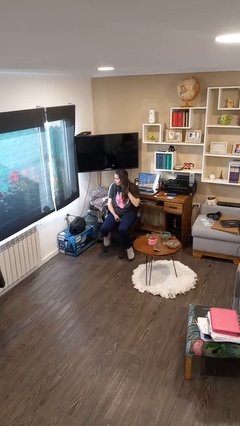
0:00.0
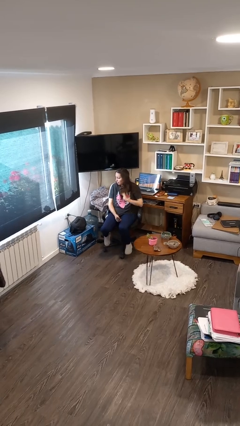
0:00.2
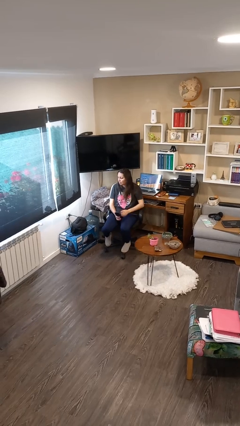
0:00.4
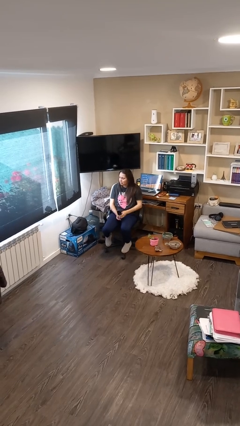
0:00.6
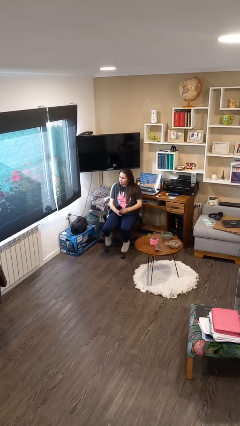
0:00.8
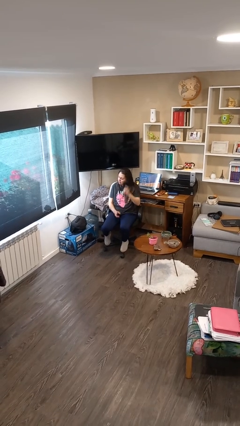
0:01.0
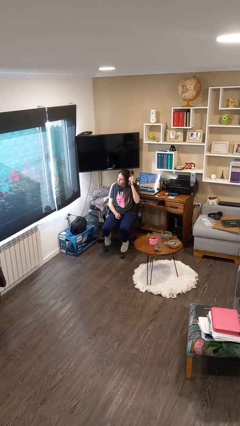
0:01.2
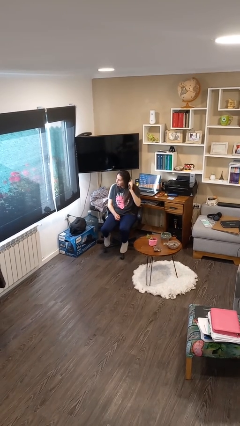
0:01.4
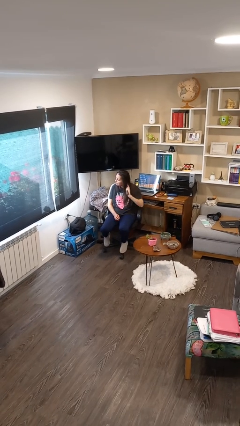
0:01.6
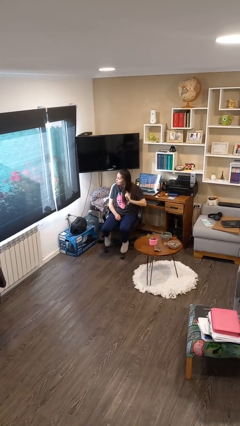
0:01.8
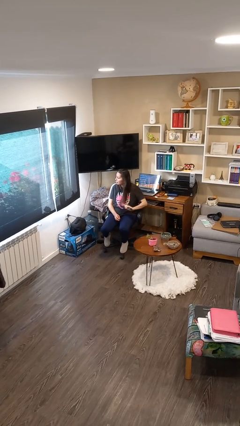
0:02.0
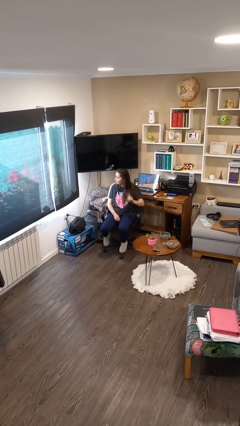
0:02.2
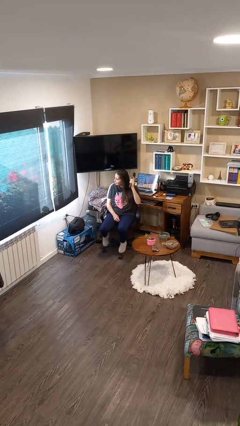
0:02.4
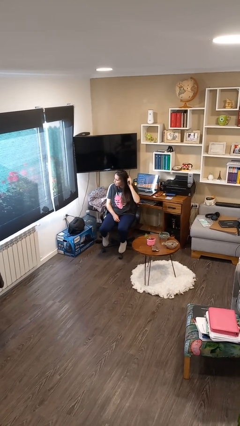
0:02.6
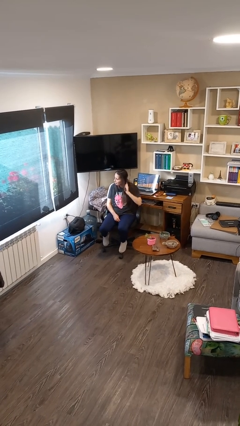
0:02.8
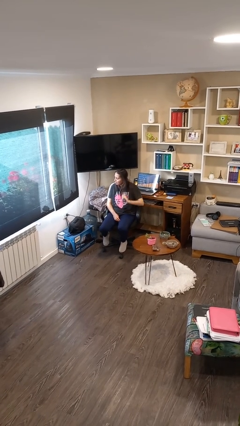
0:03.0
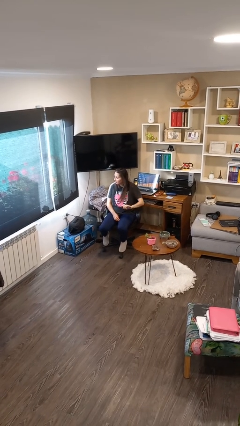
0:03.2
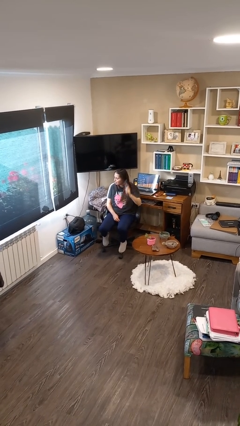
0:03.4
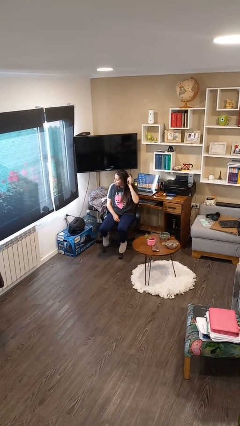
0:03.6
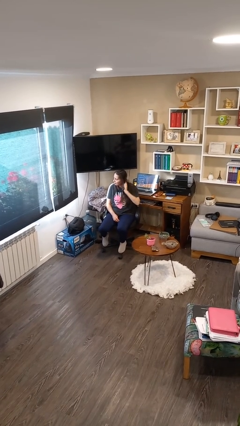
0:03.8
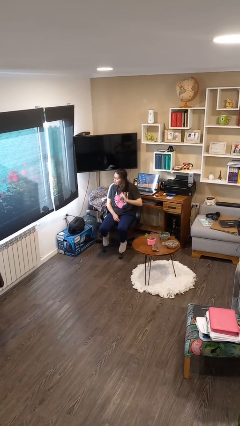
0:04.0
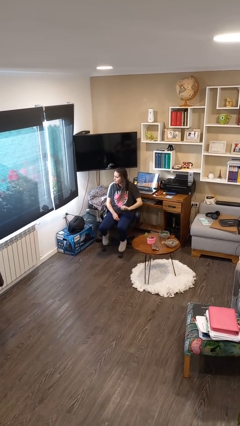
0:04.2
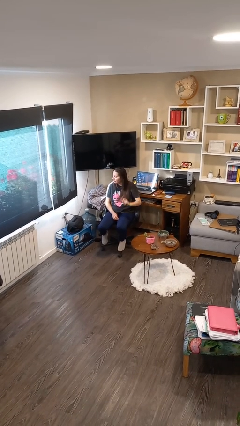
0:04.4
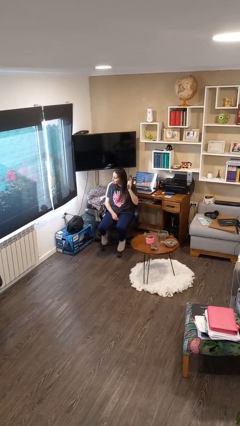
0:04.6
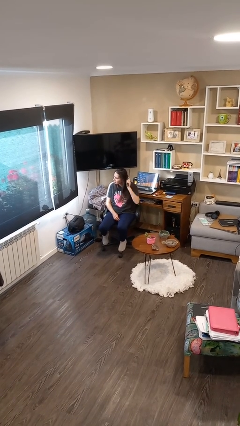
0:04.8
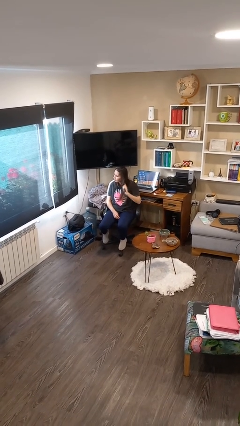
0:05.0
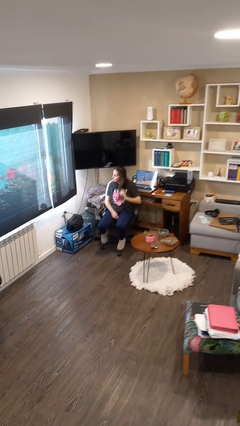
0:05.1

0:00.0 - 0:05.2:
person brushes hair

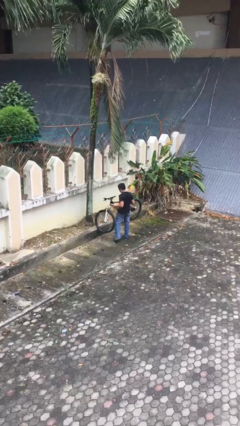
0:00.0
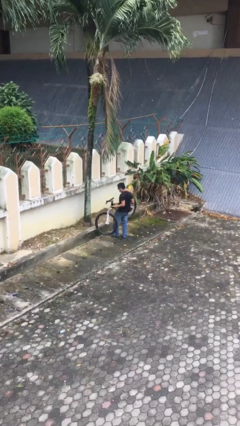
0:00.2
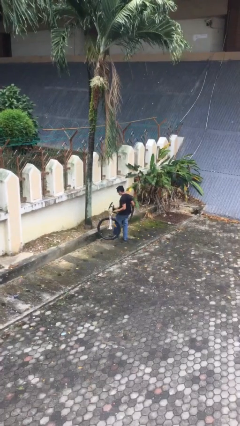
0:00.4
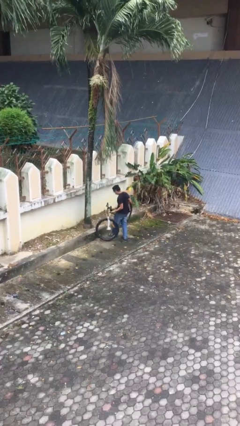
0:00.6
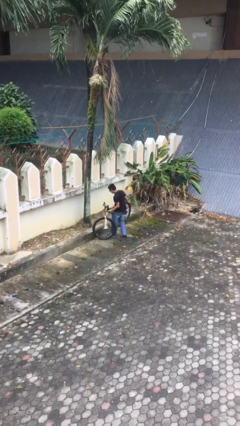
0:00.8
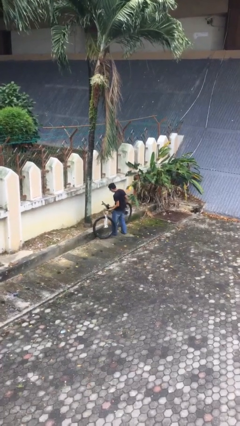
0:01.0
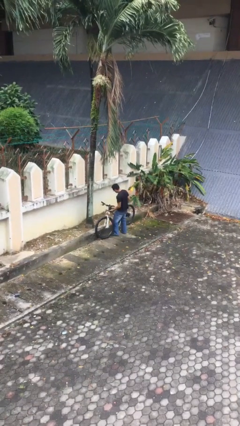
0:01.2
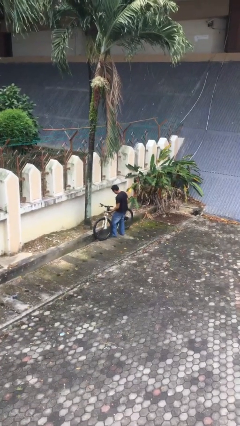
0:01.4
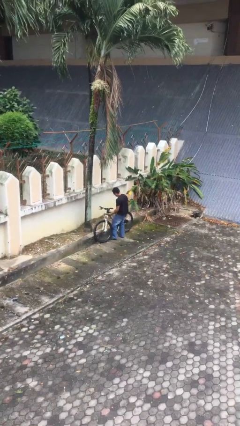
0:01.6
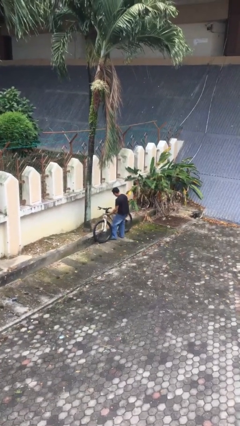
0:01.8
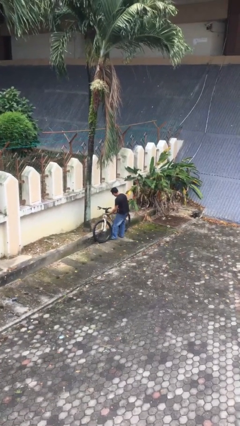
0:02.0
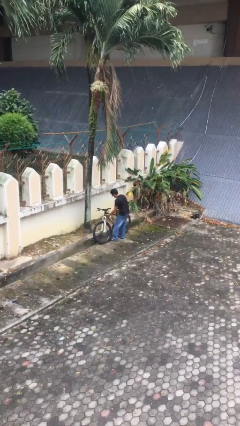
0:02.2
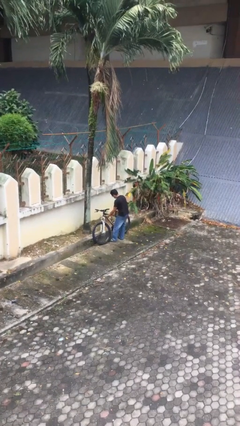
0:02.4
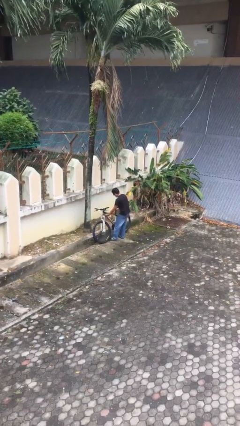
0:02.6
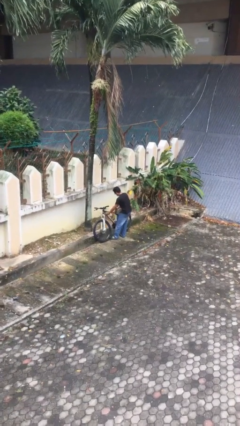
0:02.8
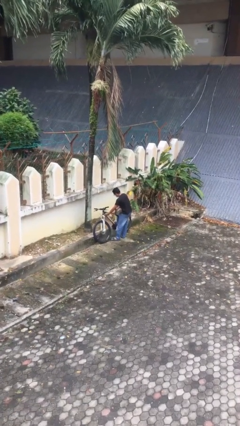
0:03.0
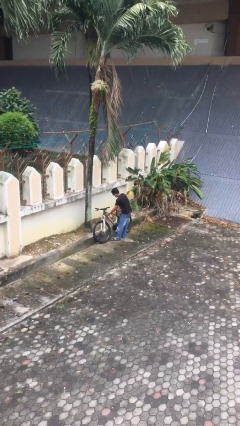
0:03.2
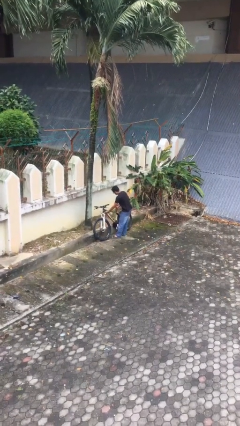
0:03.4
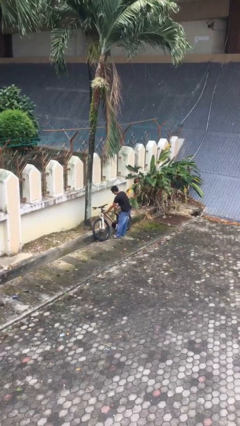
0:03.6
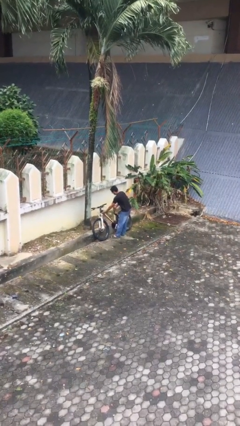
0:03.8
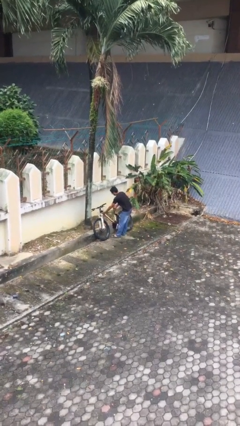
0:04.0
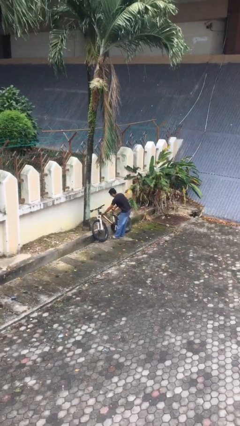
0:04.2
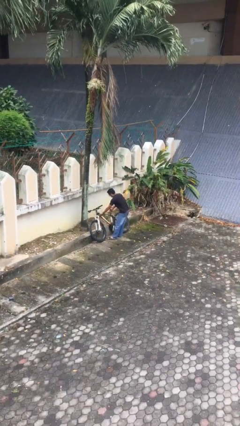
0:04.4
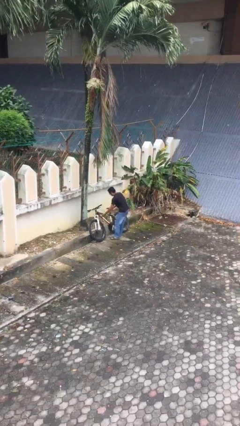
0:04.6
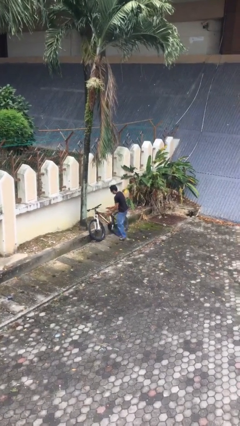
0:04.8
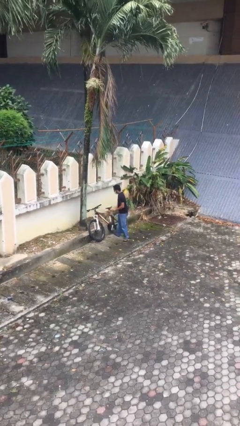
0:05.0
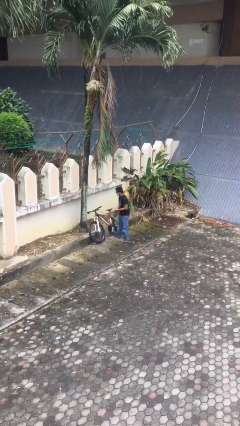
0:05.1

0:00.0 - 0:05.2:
person puts down object on floor

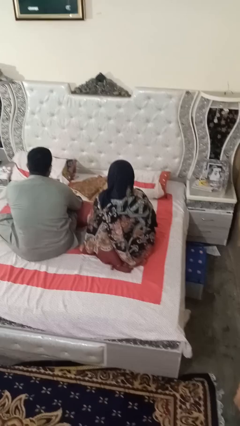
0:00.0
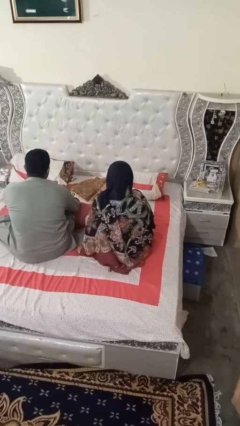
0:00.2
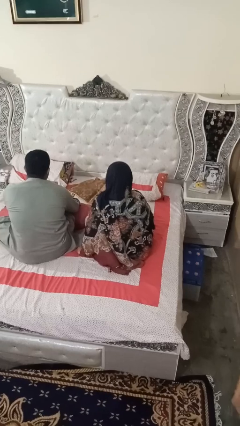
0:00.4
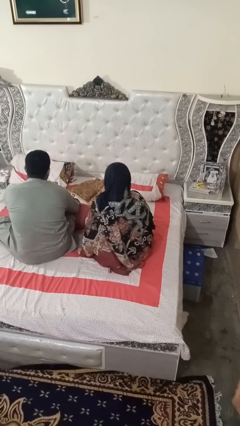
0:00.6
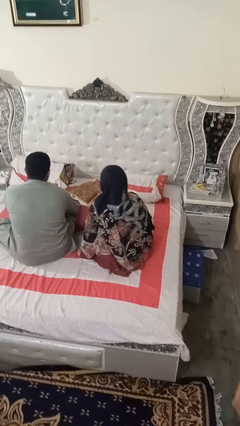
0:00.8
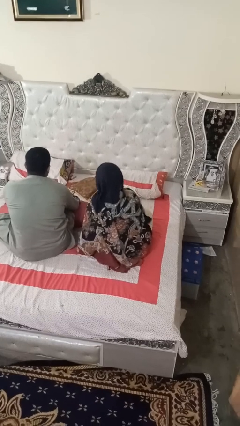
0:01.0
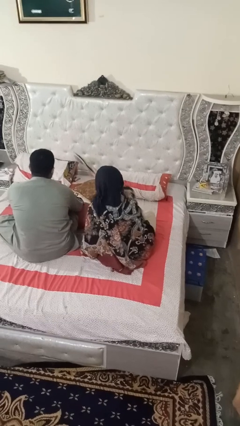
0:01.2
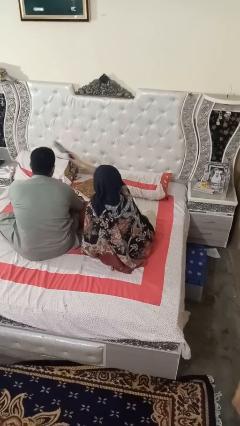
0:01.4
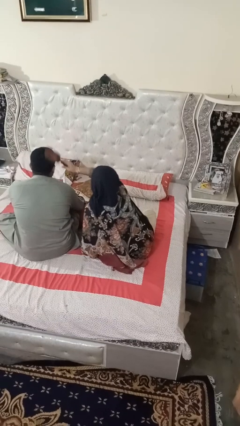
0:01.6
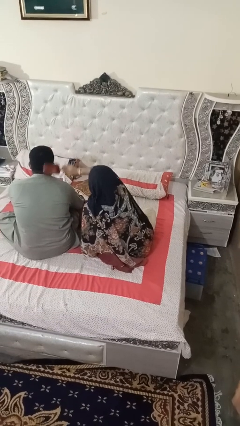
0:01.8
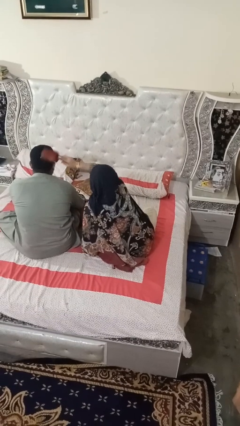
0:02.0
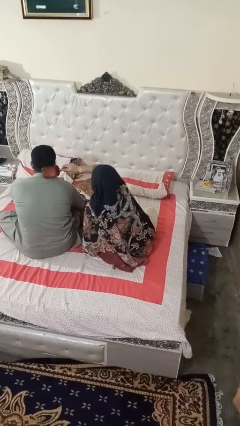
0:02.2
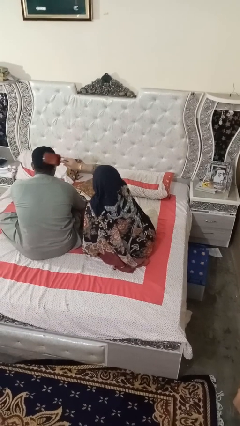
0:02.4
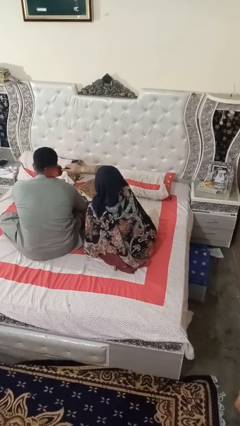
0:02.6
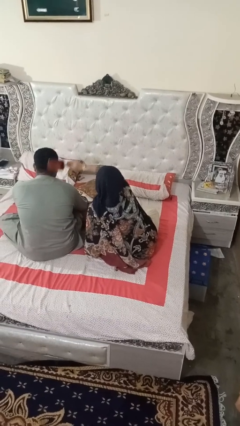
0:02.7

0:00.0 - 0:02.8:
person brushes hair of person

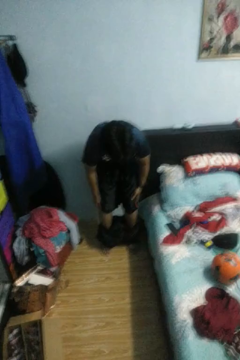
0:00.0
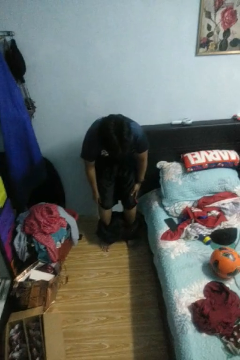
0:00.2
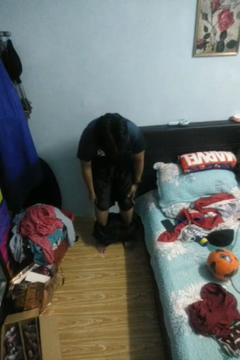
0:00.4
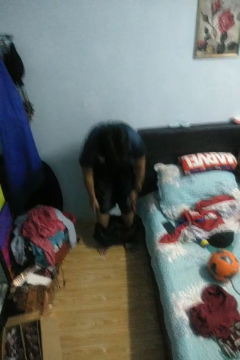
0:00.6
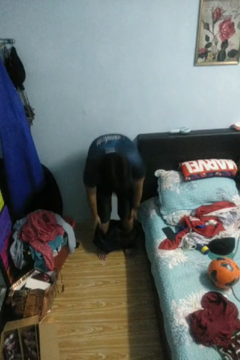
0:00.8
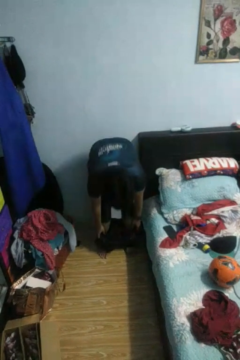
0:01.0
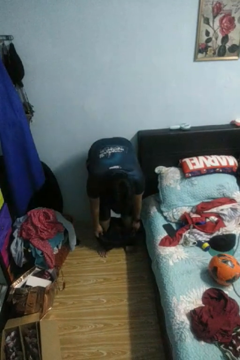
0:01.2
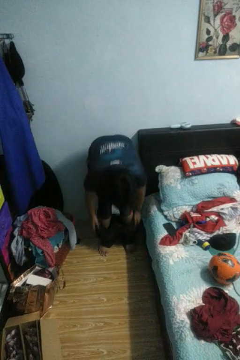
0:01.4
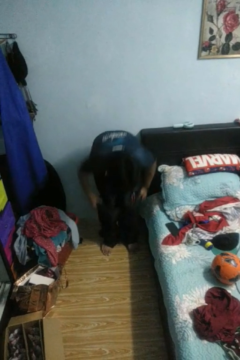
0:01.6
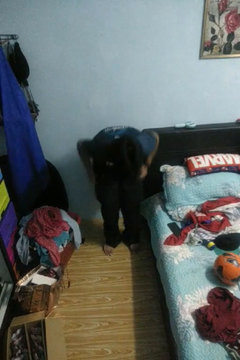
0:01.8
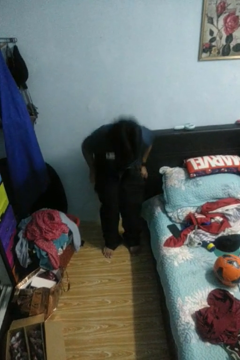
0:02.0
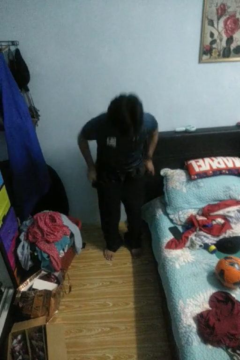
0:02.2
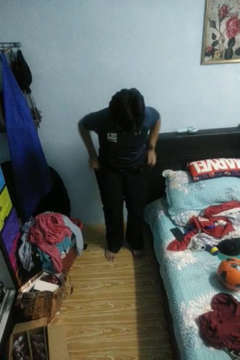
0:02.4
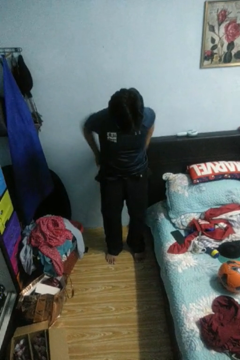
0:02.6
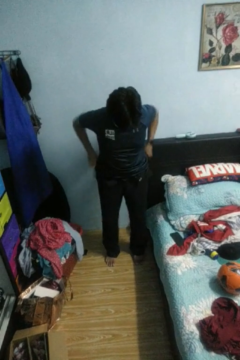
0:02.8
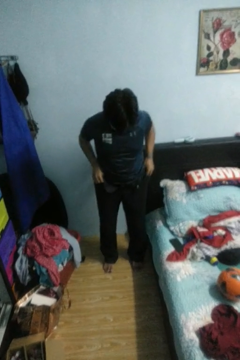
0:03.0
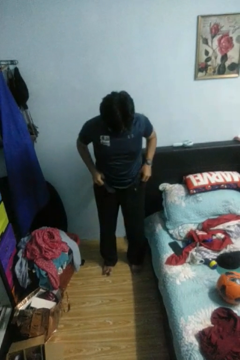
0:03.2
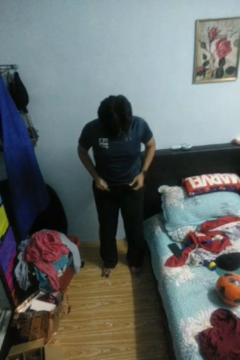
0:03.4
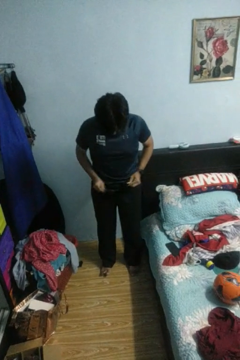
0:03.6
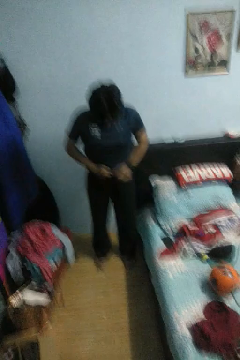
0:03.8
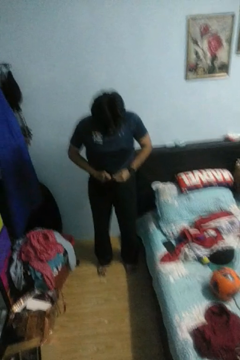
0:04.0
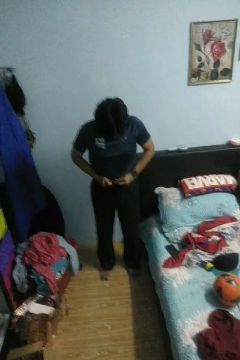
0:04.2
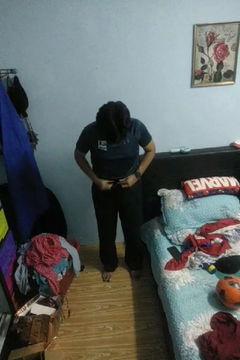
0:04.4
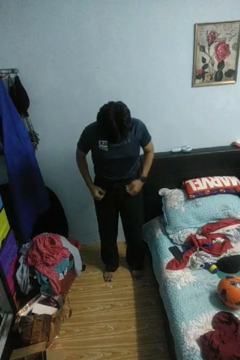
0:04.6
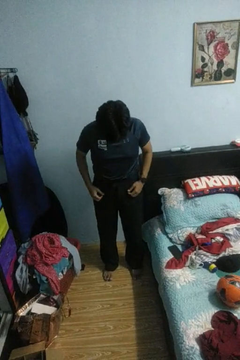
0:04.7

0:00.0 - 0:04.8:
person puts on pants
